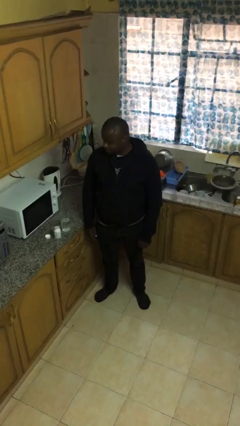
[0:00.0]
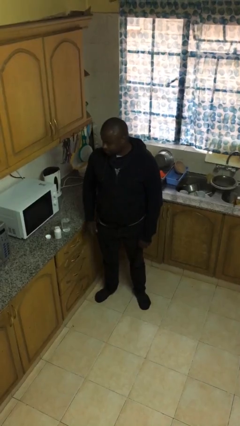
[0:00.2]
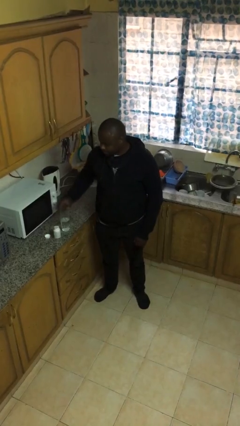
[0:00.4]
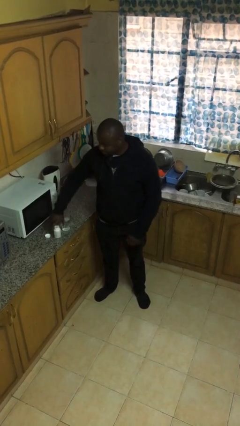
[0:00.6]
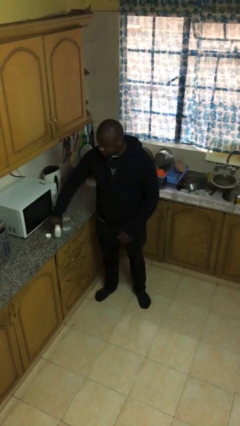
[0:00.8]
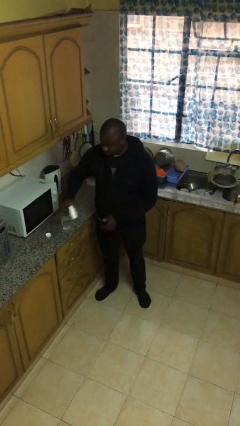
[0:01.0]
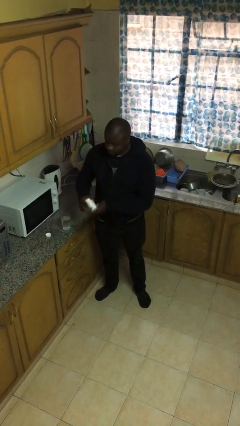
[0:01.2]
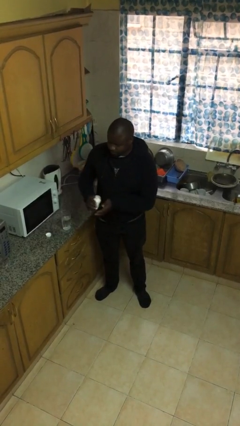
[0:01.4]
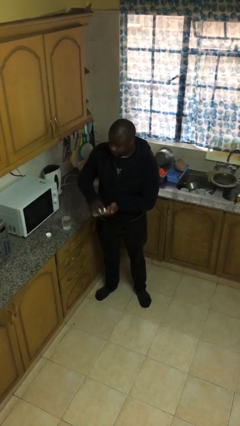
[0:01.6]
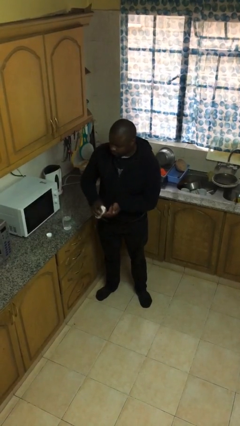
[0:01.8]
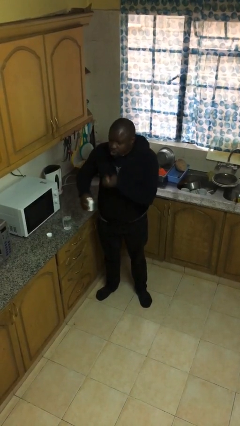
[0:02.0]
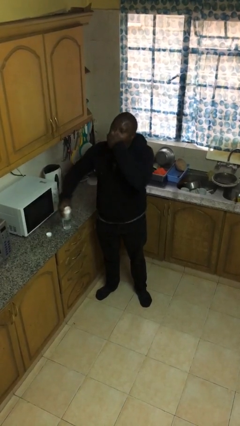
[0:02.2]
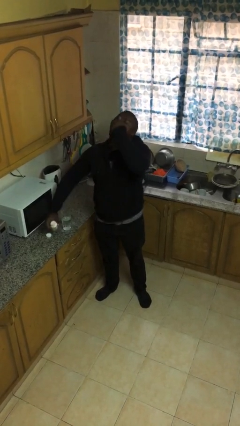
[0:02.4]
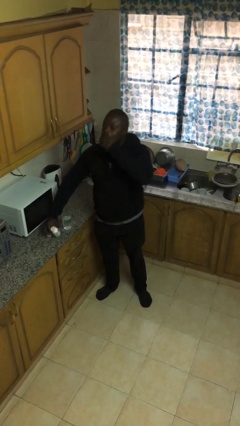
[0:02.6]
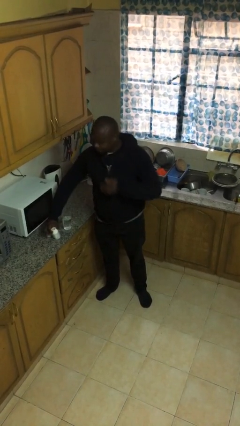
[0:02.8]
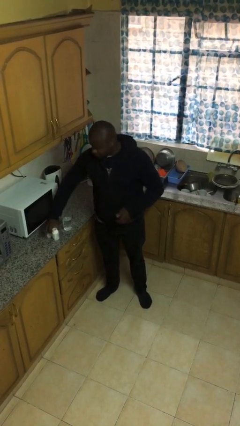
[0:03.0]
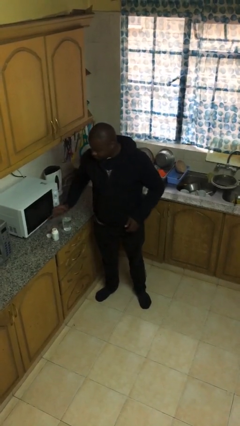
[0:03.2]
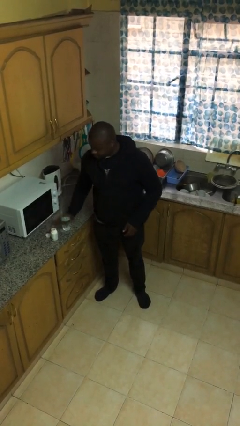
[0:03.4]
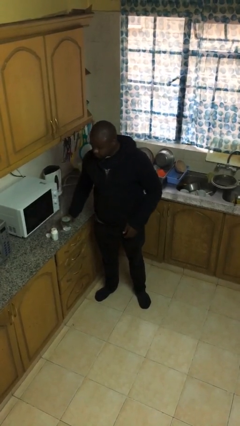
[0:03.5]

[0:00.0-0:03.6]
person takes medicine pills

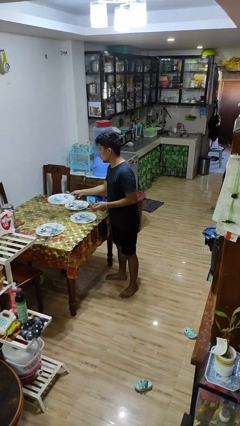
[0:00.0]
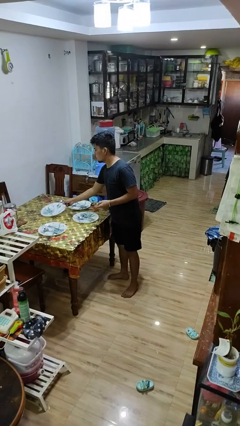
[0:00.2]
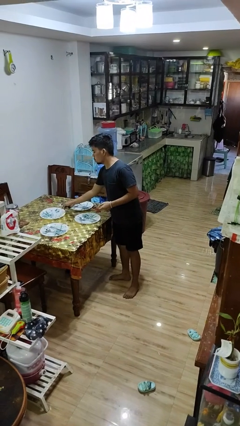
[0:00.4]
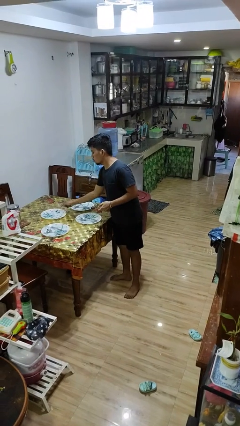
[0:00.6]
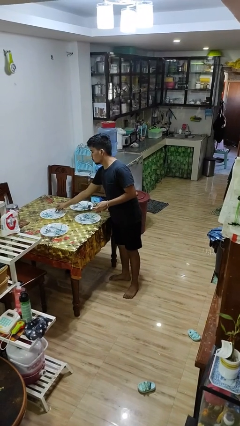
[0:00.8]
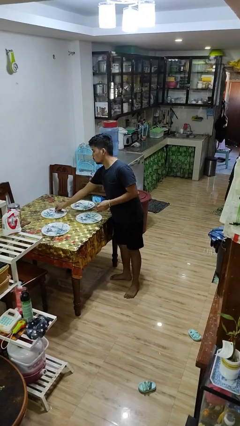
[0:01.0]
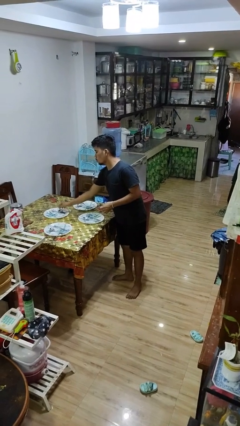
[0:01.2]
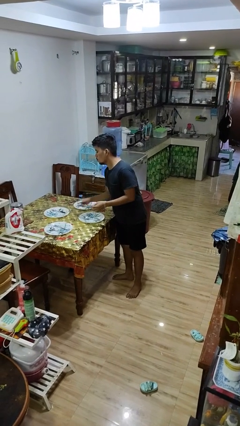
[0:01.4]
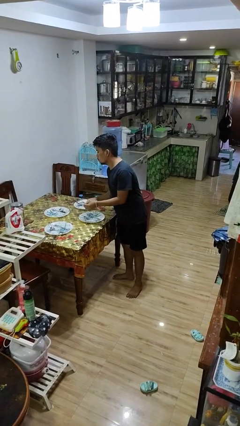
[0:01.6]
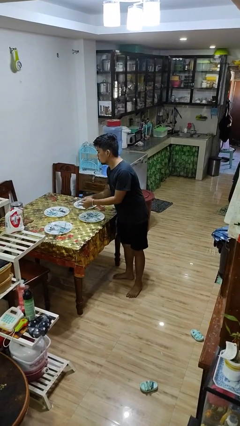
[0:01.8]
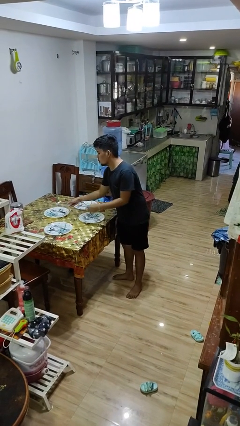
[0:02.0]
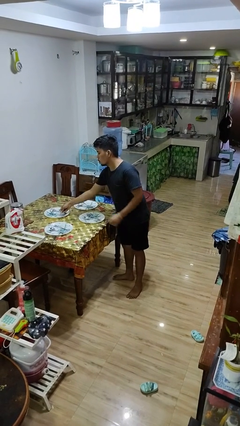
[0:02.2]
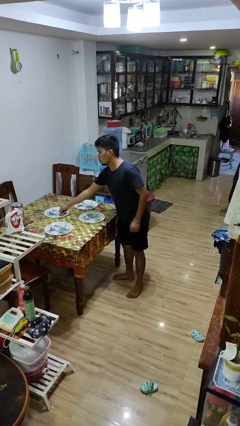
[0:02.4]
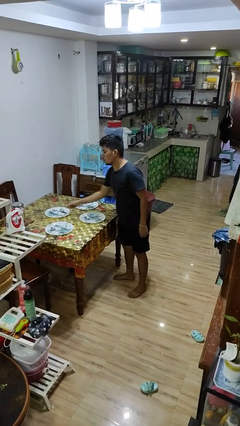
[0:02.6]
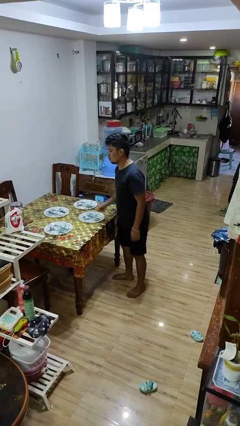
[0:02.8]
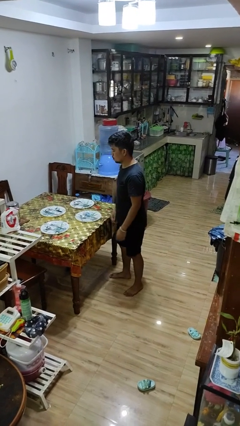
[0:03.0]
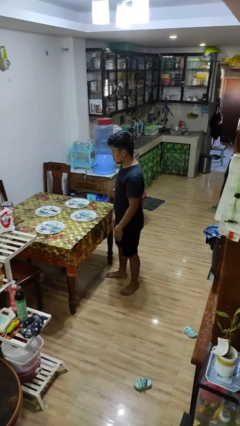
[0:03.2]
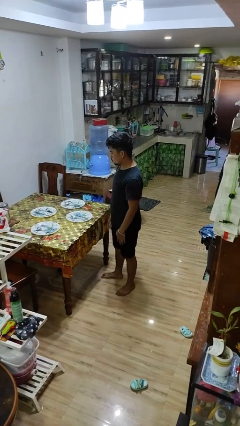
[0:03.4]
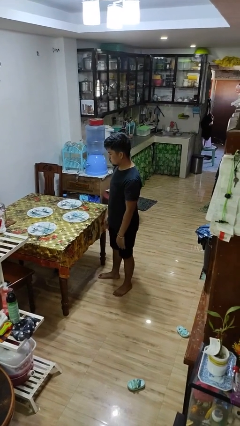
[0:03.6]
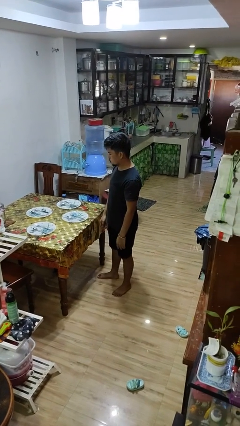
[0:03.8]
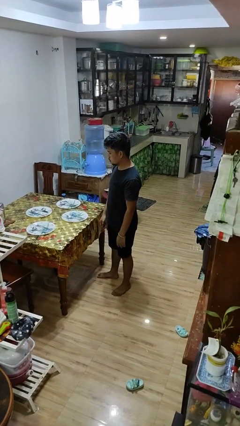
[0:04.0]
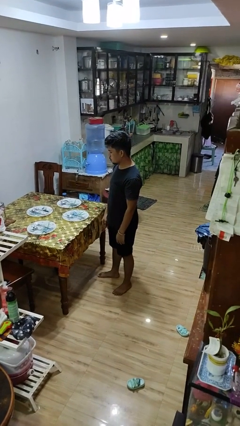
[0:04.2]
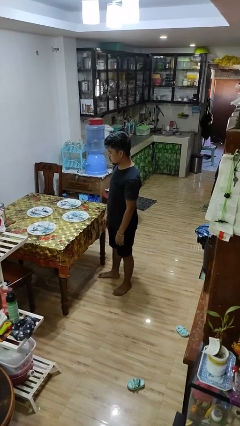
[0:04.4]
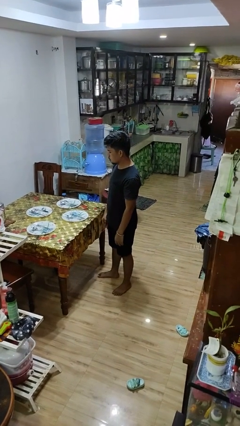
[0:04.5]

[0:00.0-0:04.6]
person sets table

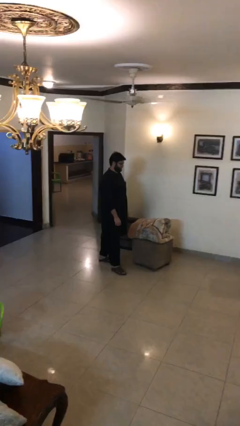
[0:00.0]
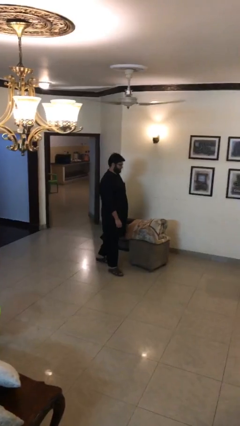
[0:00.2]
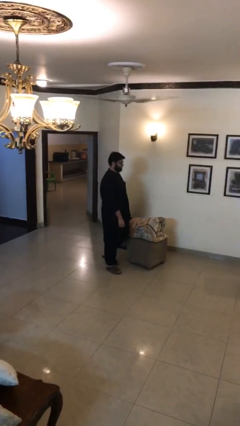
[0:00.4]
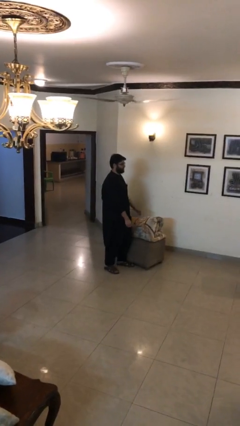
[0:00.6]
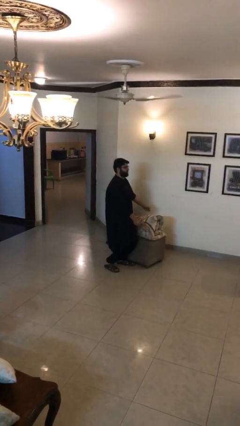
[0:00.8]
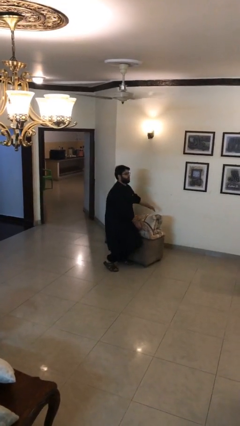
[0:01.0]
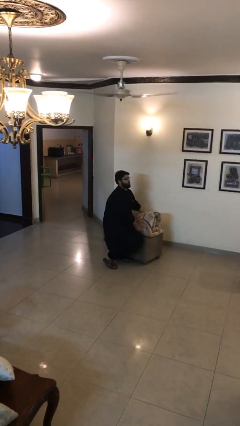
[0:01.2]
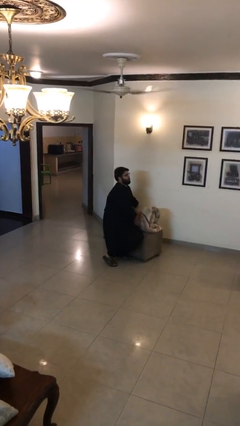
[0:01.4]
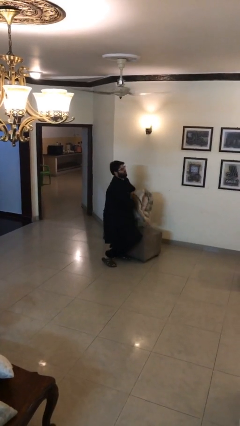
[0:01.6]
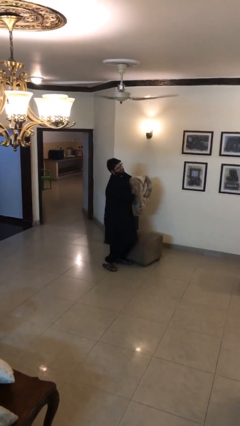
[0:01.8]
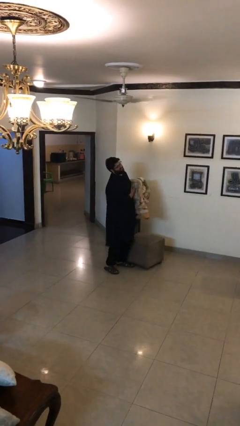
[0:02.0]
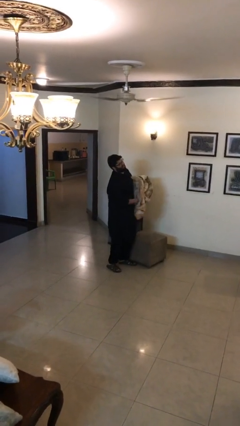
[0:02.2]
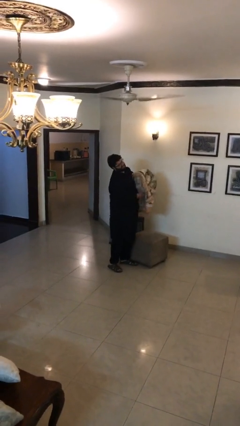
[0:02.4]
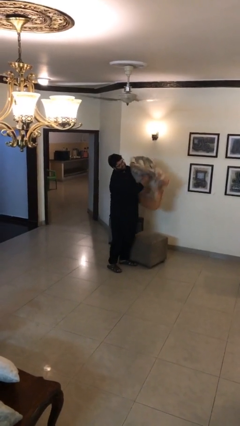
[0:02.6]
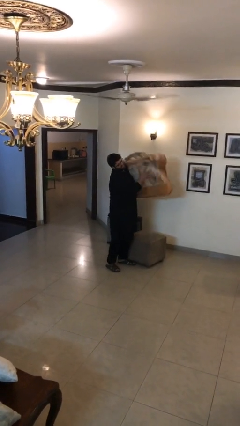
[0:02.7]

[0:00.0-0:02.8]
person picks up object from floor

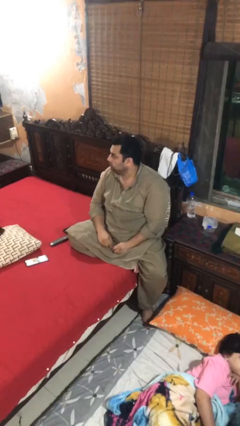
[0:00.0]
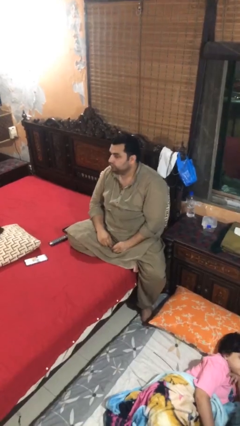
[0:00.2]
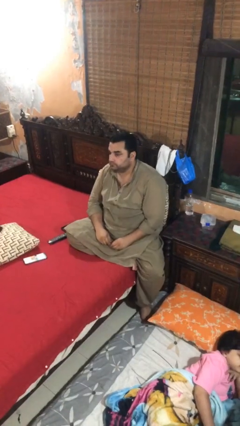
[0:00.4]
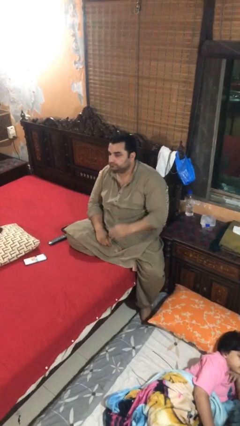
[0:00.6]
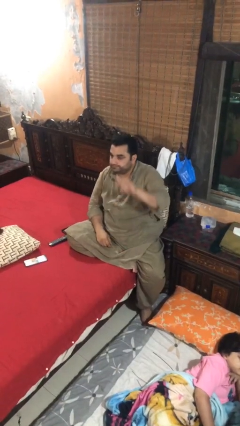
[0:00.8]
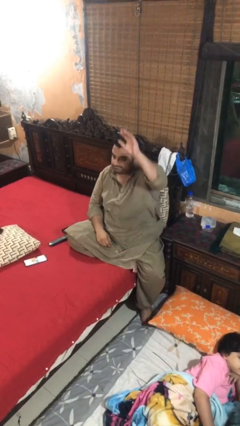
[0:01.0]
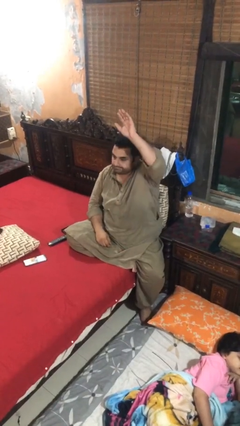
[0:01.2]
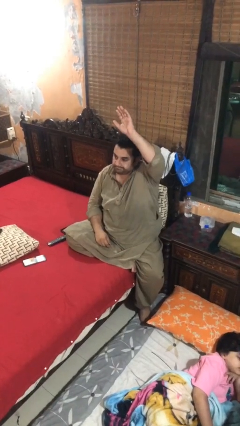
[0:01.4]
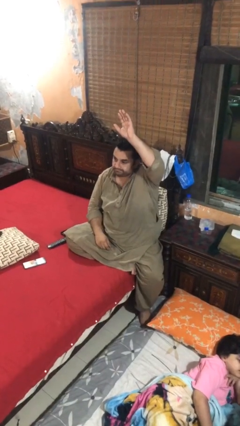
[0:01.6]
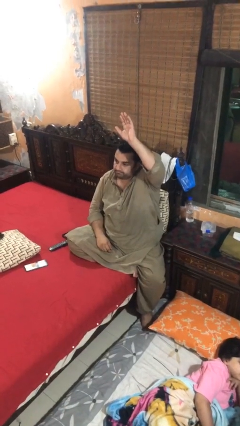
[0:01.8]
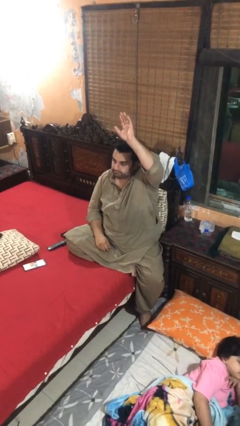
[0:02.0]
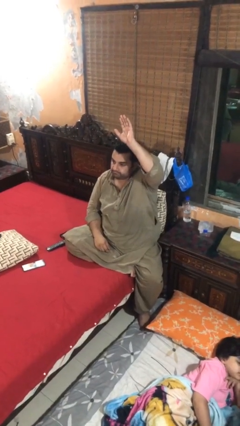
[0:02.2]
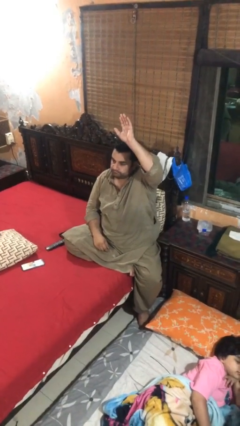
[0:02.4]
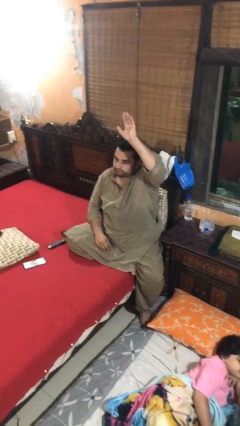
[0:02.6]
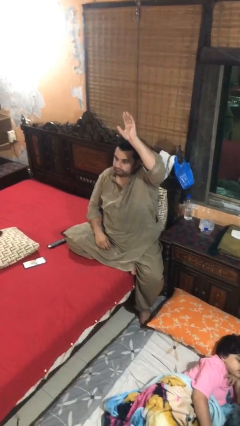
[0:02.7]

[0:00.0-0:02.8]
person gestures raise hand

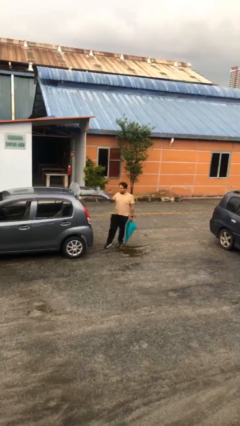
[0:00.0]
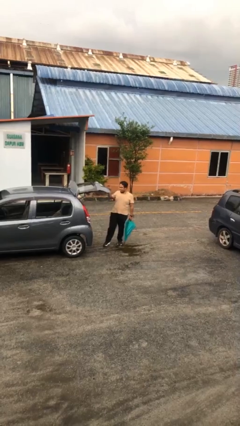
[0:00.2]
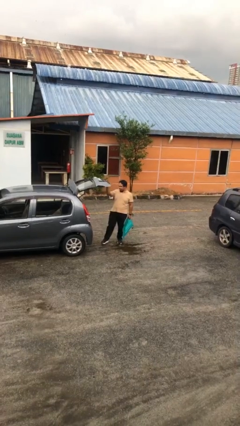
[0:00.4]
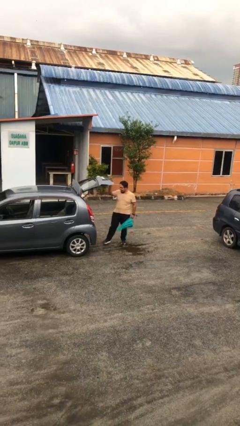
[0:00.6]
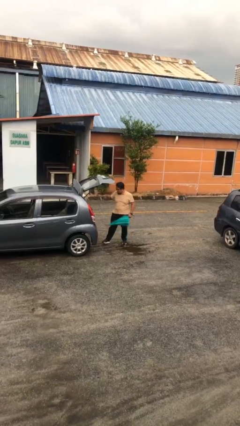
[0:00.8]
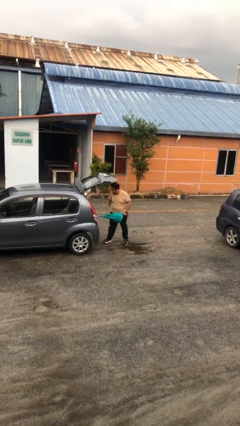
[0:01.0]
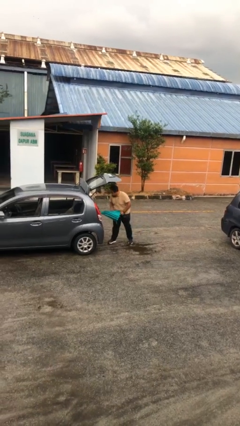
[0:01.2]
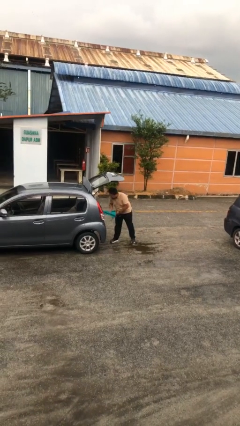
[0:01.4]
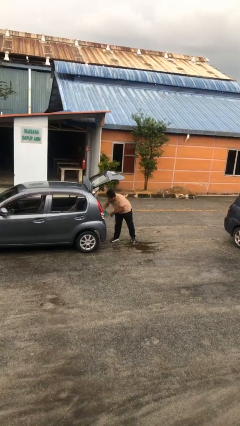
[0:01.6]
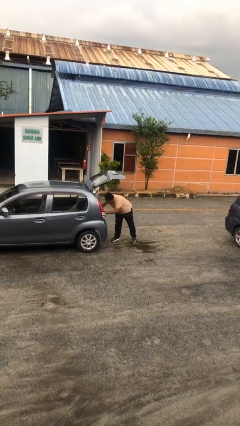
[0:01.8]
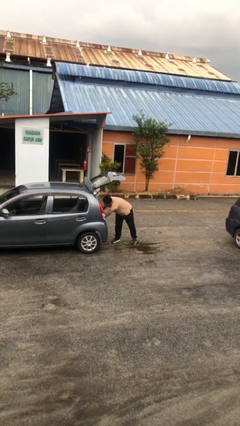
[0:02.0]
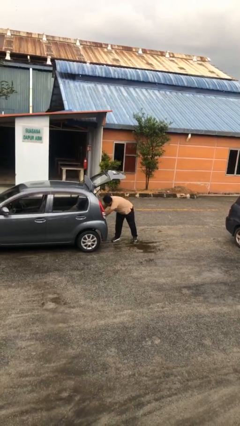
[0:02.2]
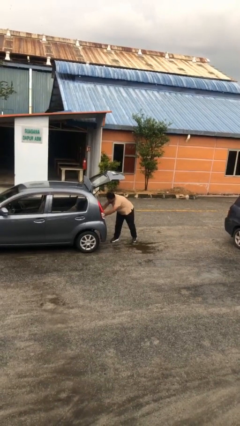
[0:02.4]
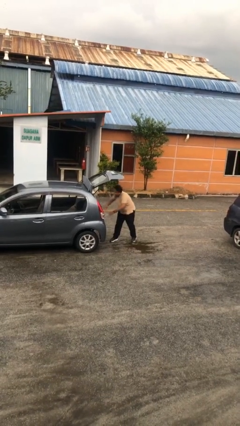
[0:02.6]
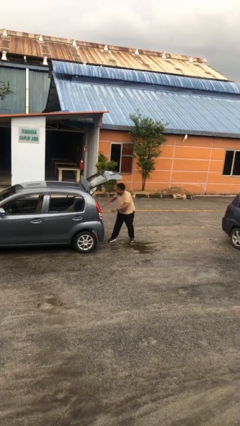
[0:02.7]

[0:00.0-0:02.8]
person loads car

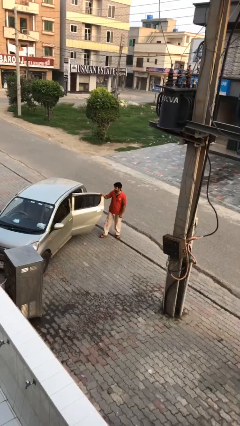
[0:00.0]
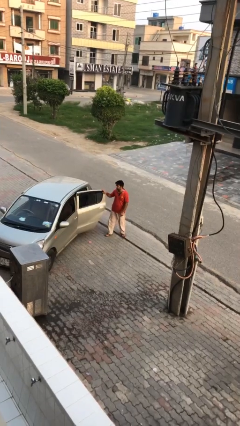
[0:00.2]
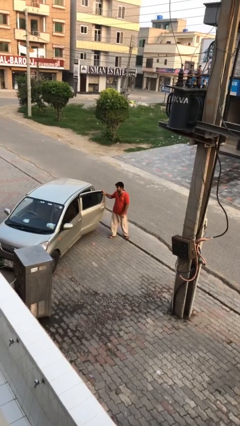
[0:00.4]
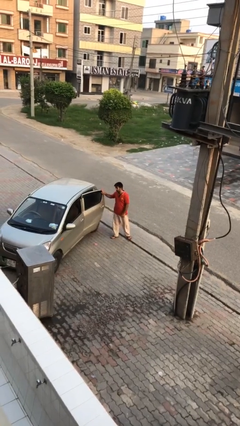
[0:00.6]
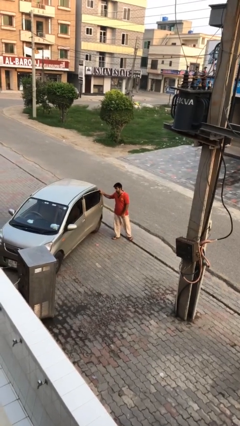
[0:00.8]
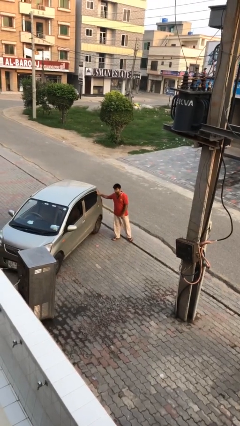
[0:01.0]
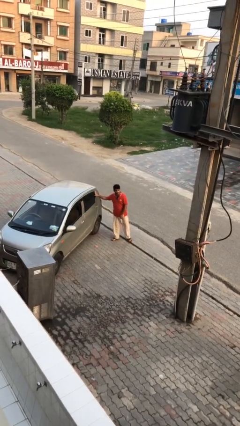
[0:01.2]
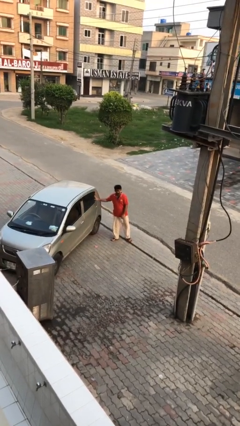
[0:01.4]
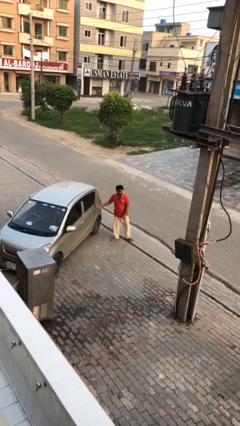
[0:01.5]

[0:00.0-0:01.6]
person closes car door
